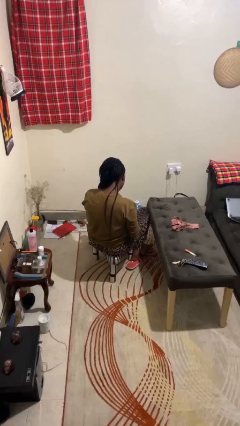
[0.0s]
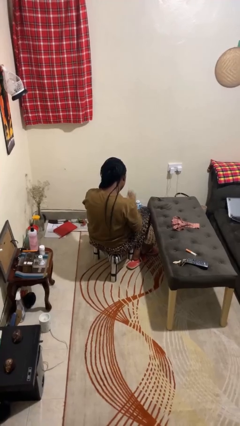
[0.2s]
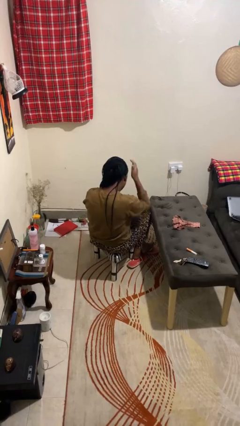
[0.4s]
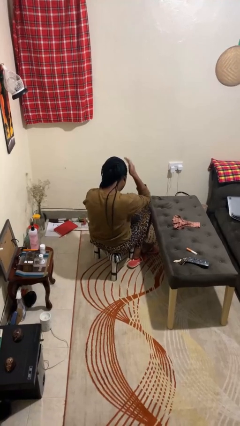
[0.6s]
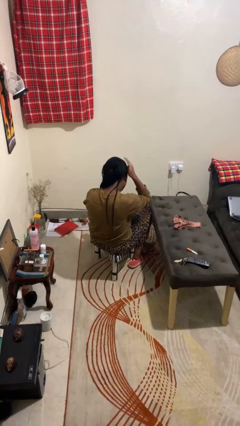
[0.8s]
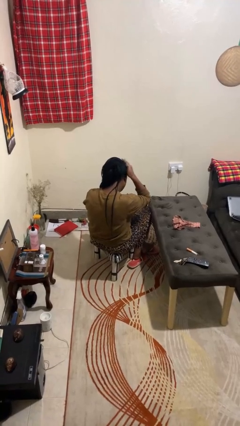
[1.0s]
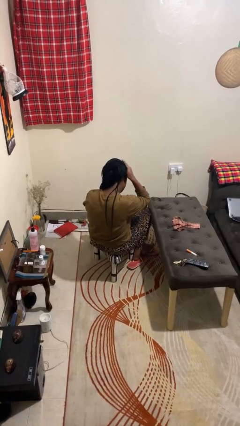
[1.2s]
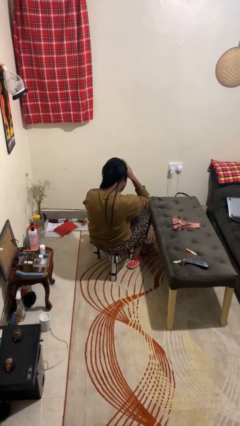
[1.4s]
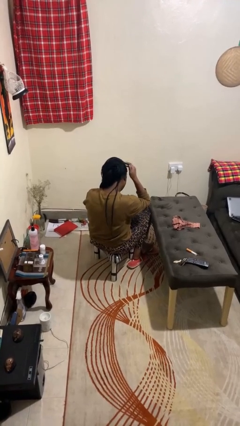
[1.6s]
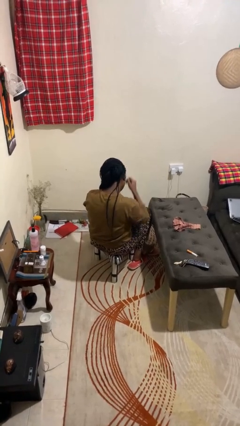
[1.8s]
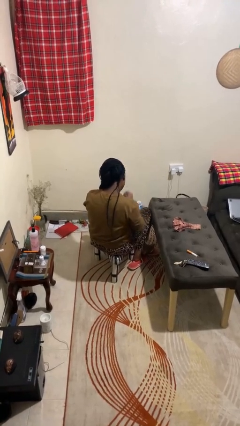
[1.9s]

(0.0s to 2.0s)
person pats head

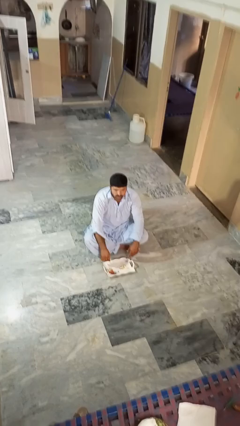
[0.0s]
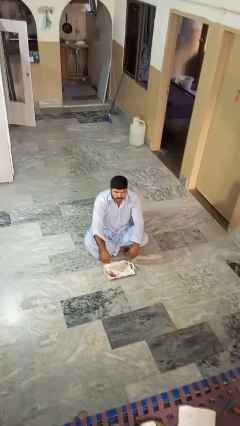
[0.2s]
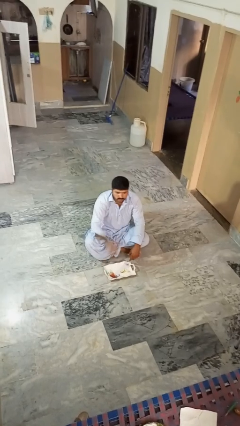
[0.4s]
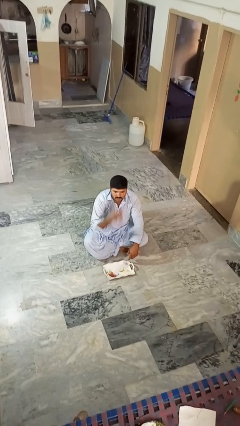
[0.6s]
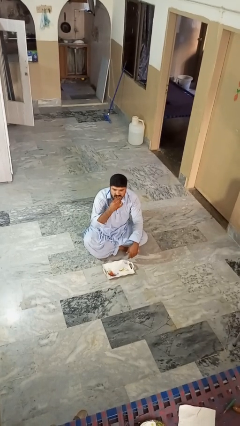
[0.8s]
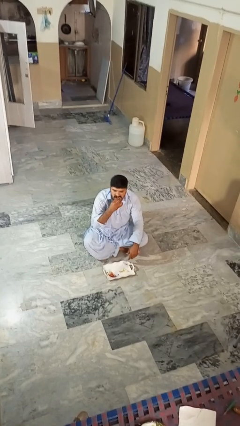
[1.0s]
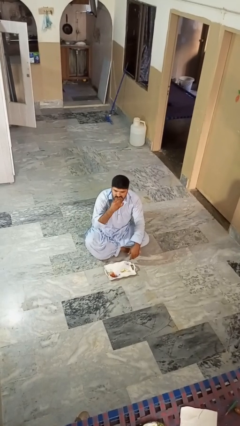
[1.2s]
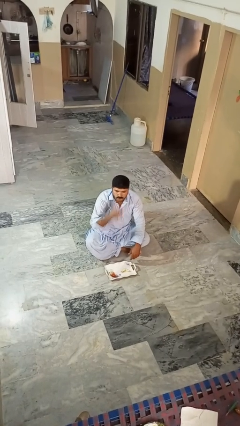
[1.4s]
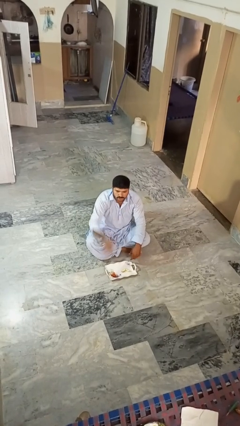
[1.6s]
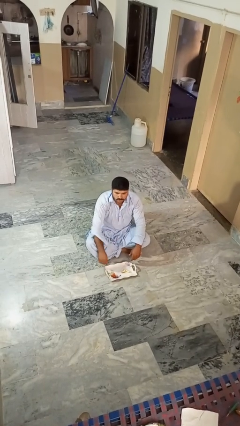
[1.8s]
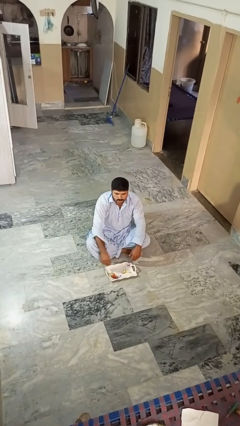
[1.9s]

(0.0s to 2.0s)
person eats apple

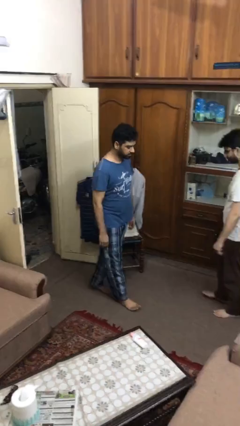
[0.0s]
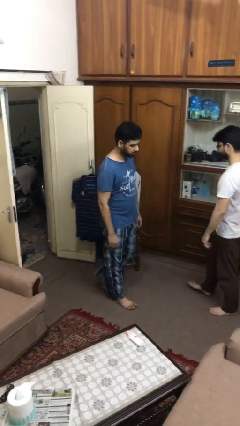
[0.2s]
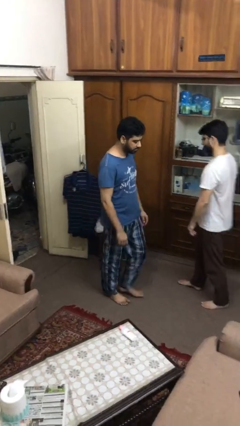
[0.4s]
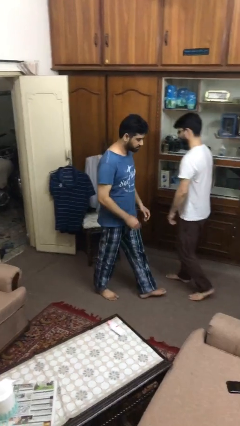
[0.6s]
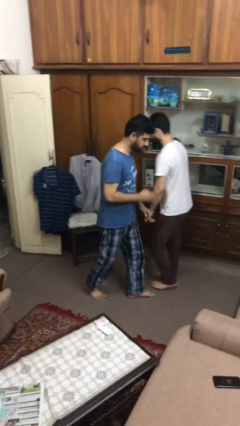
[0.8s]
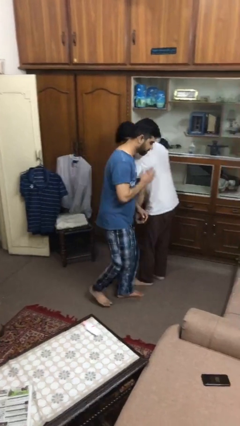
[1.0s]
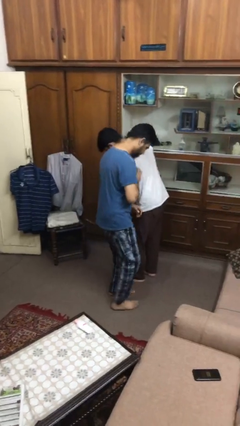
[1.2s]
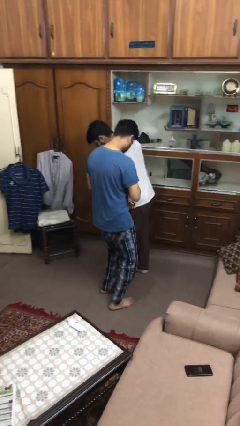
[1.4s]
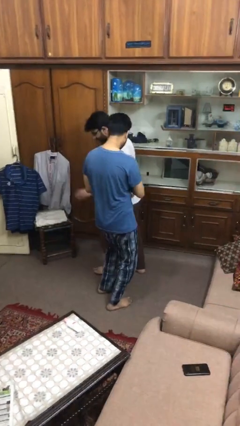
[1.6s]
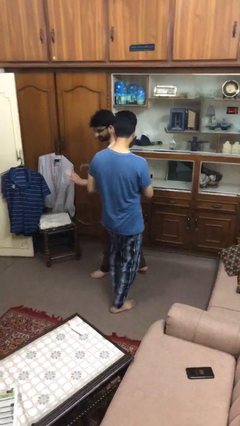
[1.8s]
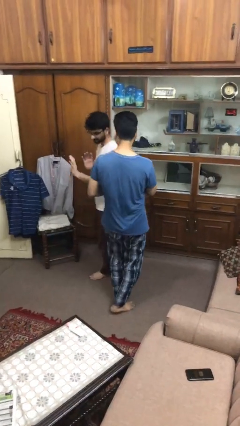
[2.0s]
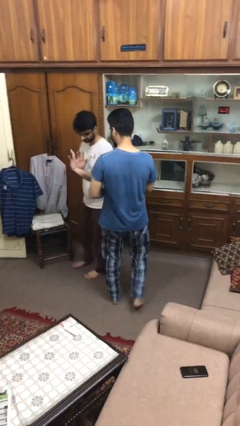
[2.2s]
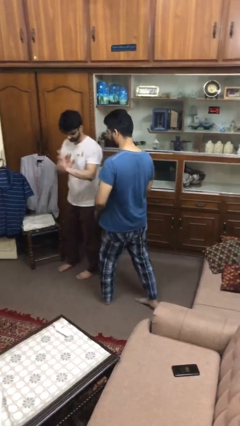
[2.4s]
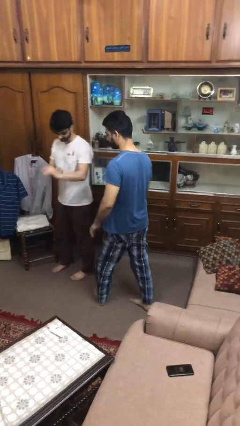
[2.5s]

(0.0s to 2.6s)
person bumps into person

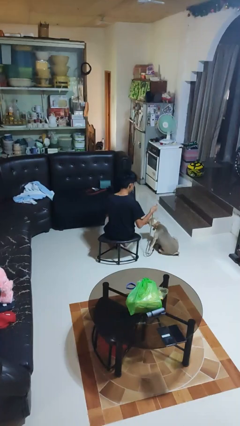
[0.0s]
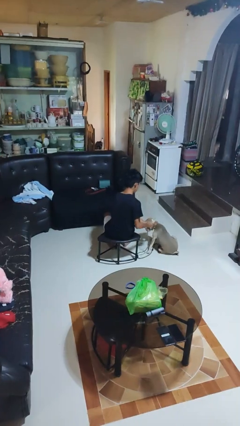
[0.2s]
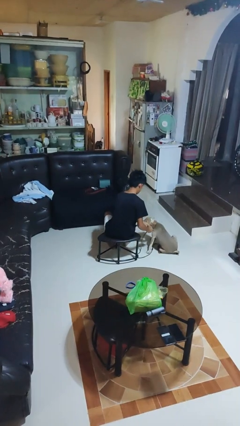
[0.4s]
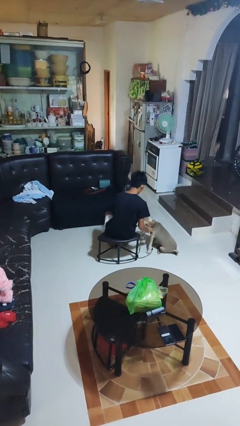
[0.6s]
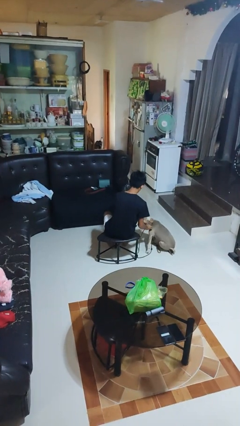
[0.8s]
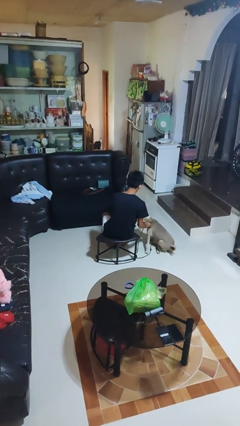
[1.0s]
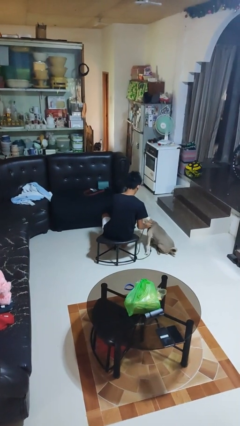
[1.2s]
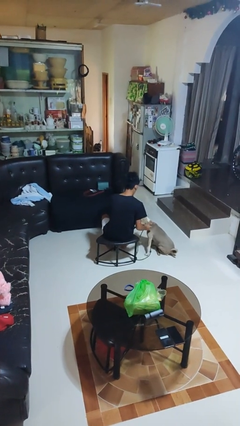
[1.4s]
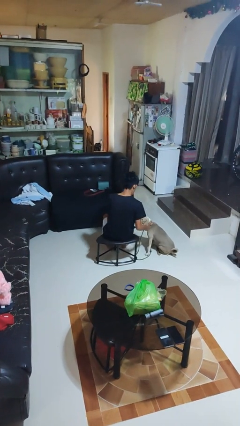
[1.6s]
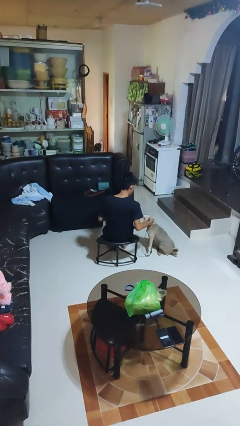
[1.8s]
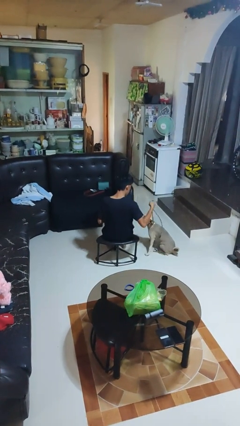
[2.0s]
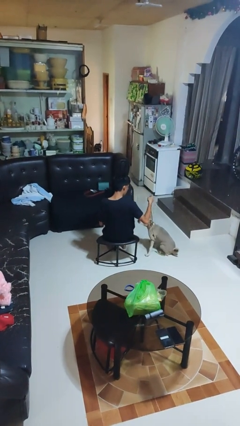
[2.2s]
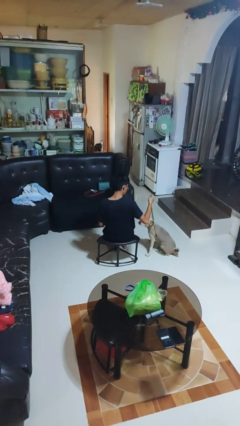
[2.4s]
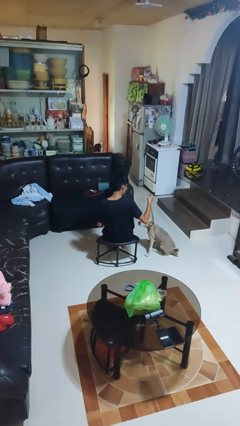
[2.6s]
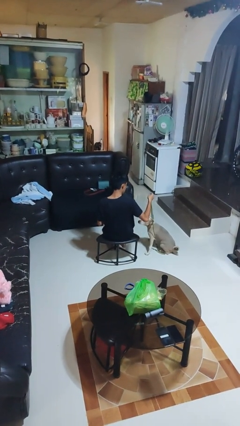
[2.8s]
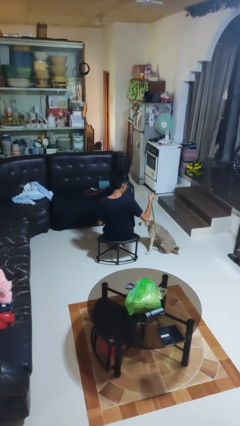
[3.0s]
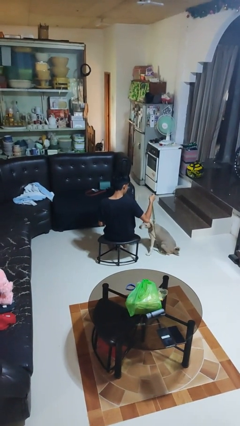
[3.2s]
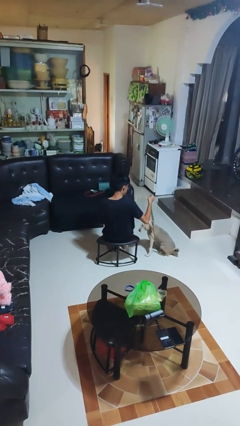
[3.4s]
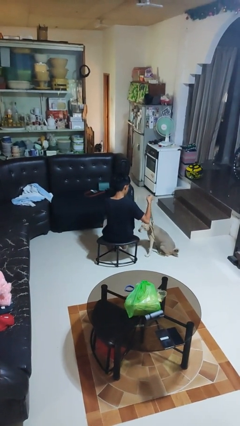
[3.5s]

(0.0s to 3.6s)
person attaches leash to dog

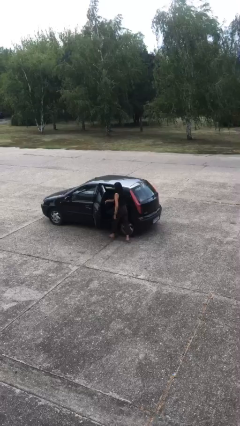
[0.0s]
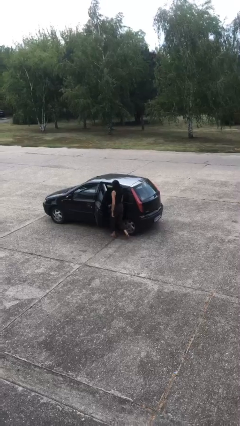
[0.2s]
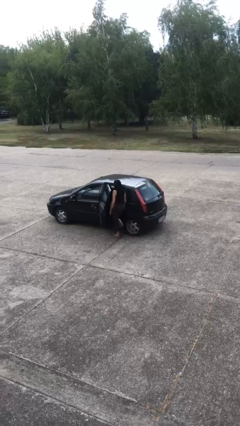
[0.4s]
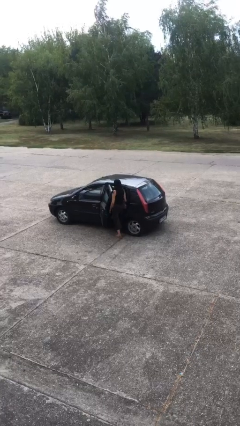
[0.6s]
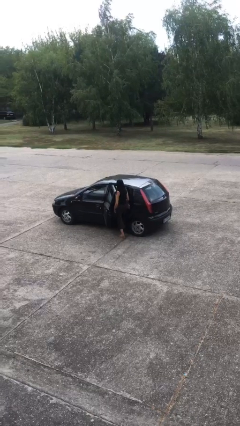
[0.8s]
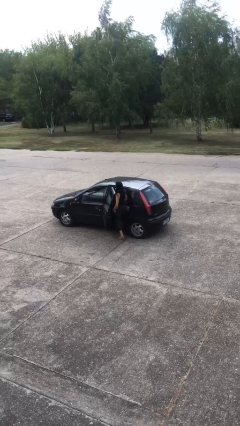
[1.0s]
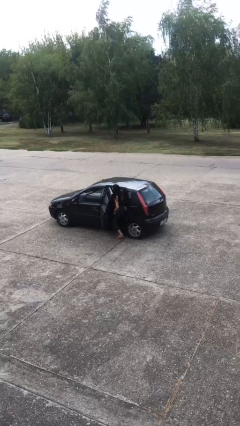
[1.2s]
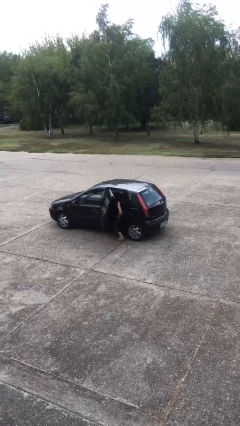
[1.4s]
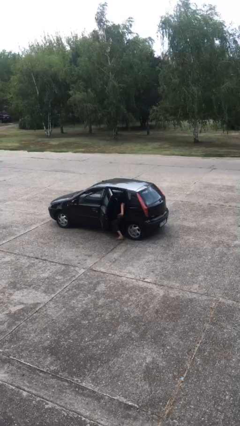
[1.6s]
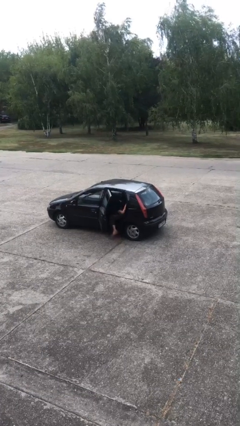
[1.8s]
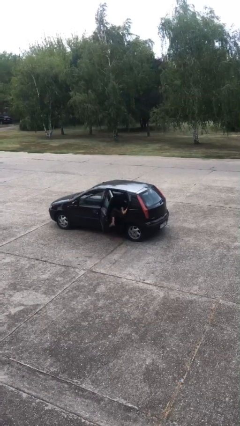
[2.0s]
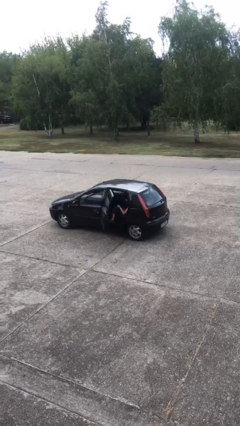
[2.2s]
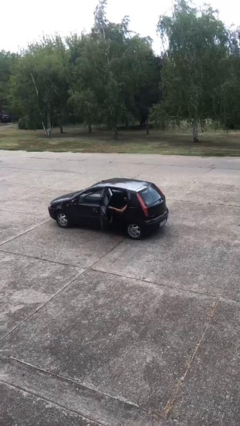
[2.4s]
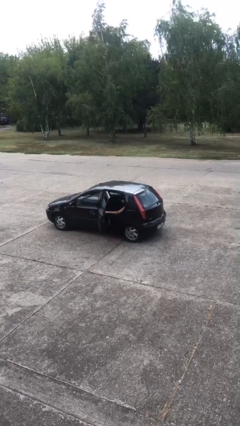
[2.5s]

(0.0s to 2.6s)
person enters car

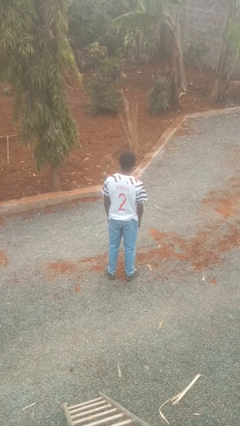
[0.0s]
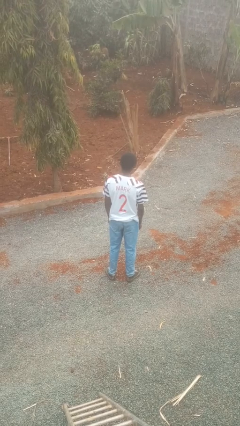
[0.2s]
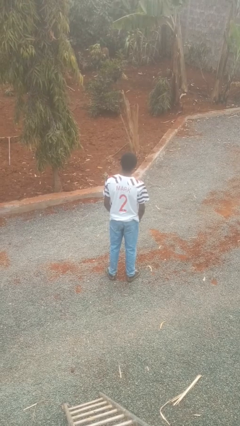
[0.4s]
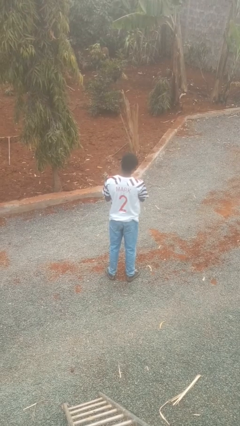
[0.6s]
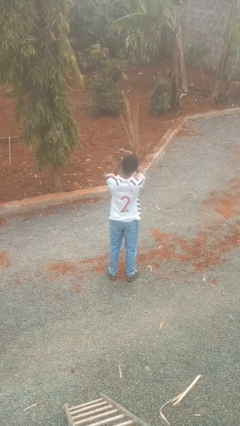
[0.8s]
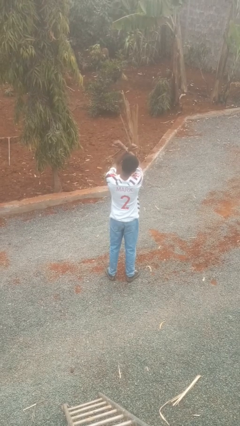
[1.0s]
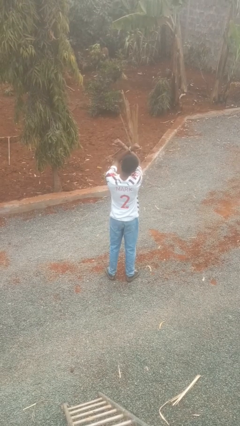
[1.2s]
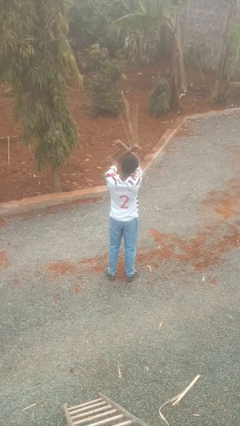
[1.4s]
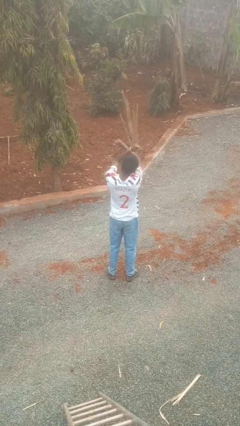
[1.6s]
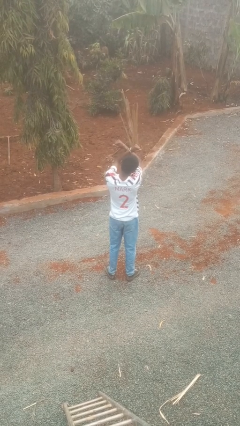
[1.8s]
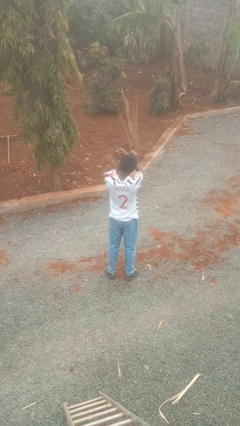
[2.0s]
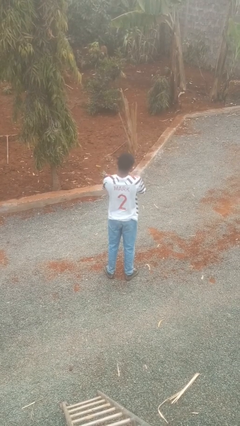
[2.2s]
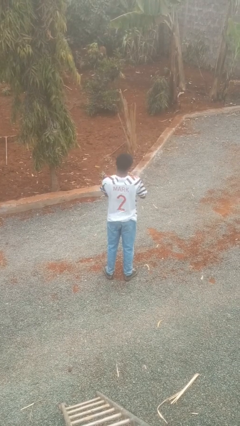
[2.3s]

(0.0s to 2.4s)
person gestures arms x

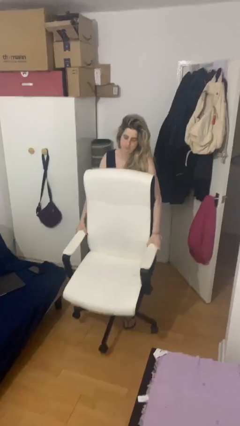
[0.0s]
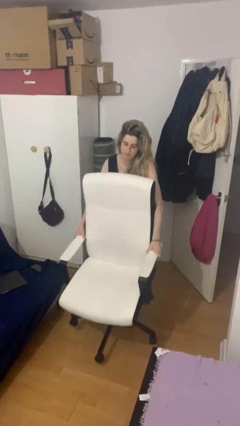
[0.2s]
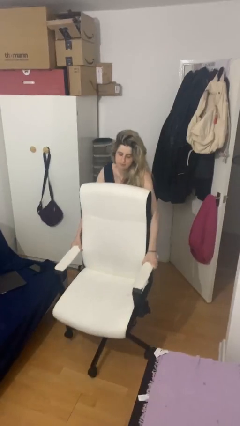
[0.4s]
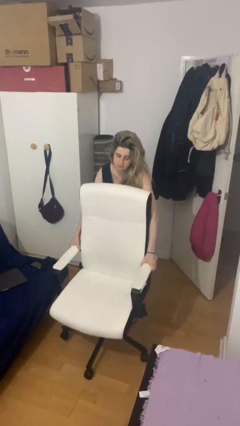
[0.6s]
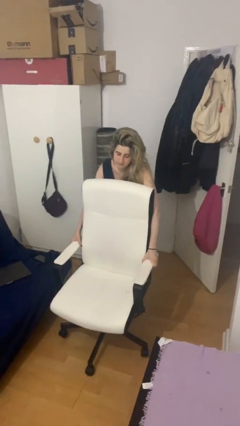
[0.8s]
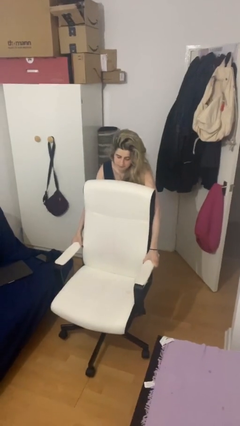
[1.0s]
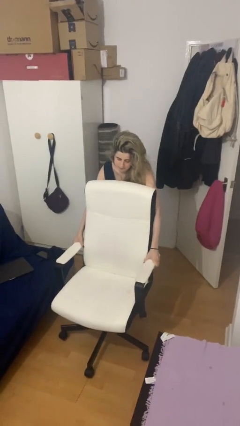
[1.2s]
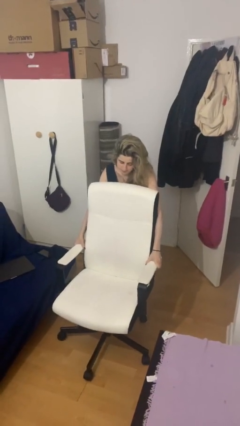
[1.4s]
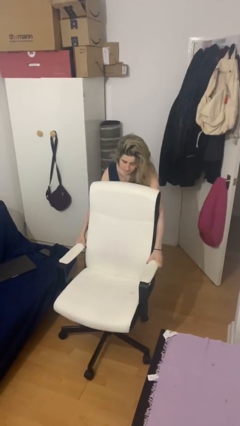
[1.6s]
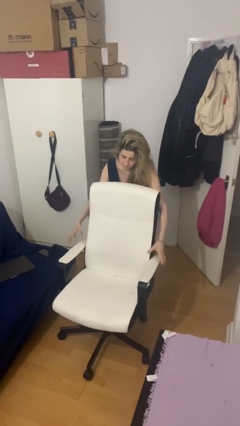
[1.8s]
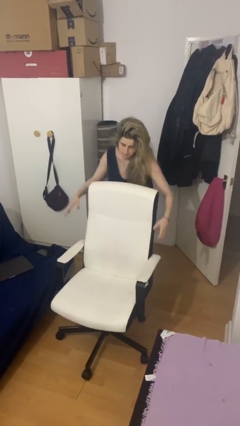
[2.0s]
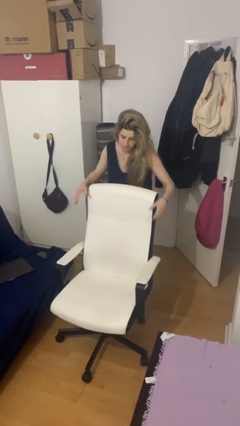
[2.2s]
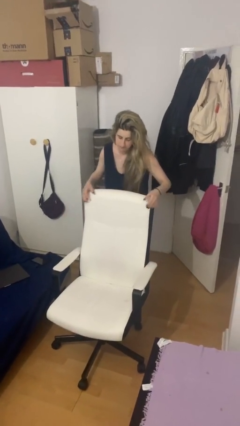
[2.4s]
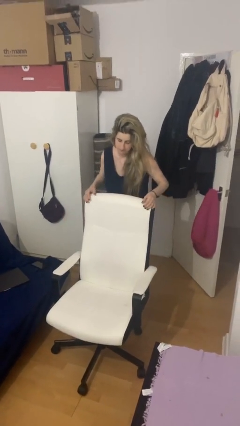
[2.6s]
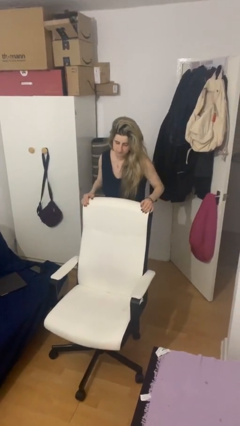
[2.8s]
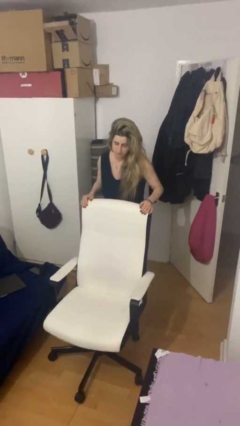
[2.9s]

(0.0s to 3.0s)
person puts down object on floor
